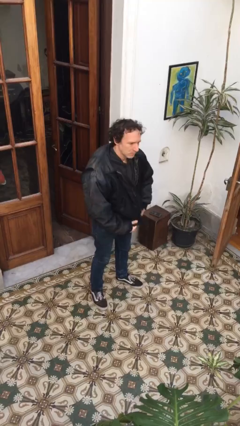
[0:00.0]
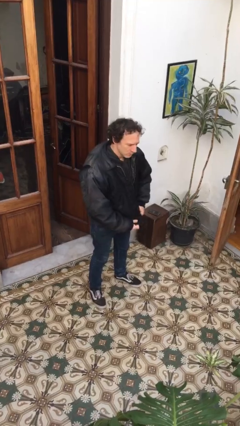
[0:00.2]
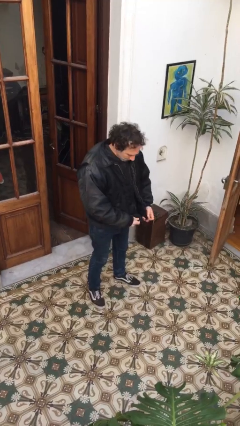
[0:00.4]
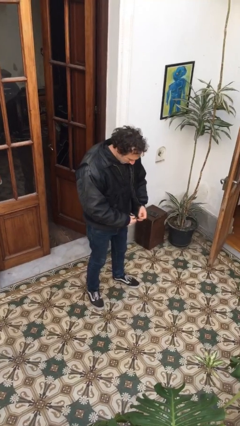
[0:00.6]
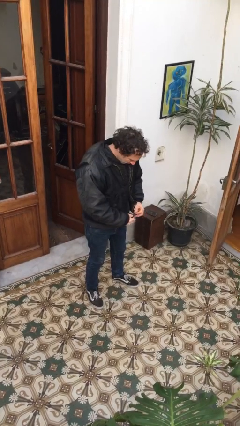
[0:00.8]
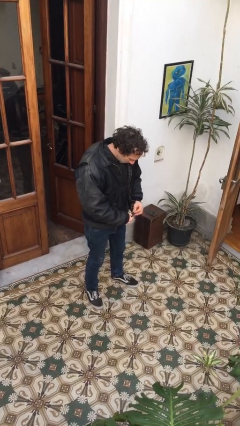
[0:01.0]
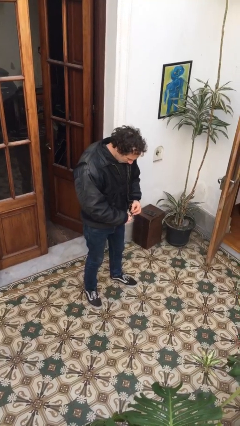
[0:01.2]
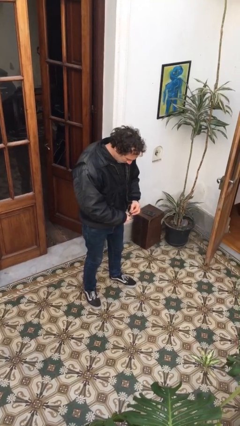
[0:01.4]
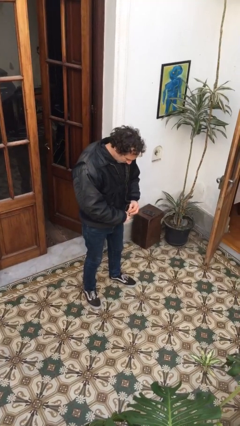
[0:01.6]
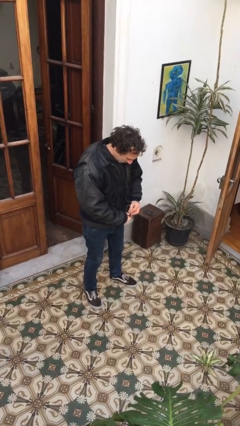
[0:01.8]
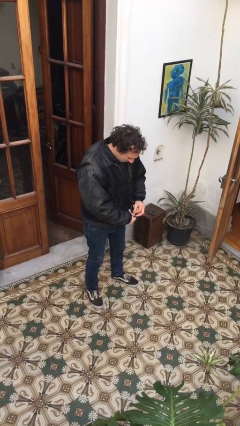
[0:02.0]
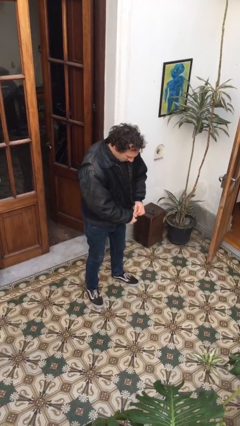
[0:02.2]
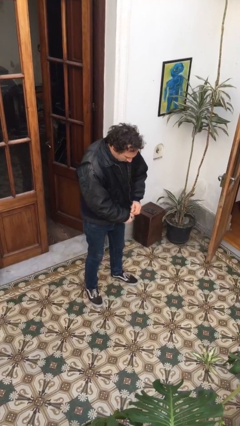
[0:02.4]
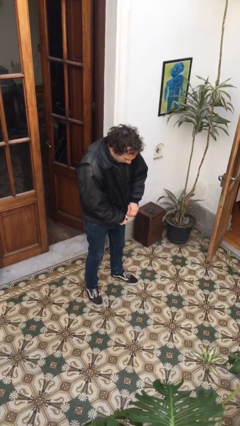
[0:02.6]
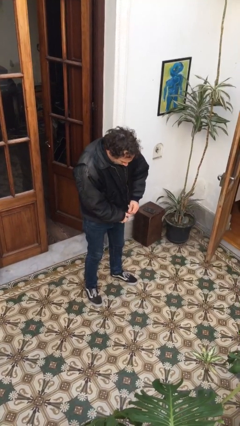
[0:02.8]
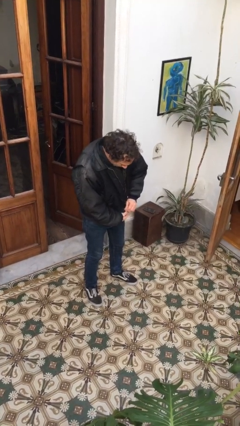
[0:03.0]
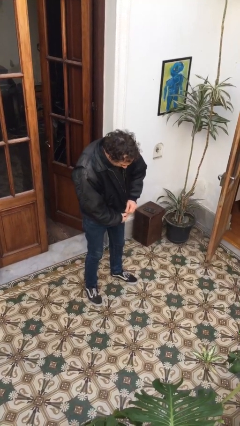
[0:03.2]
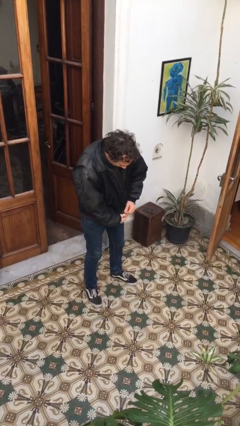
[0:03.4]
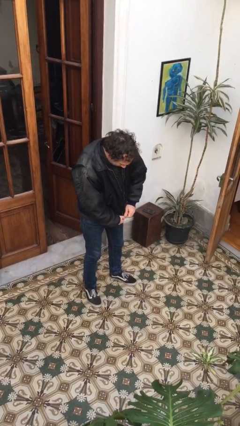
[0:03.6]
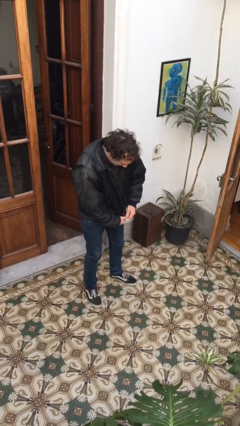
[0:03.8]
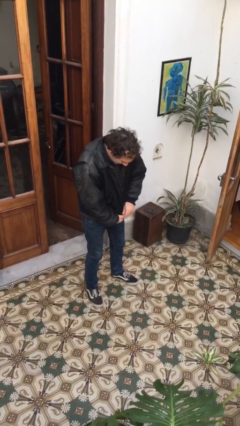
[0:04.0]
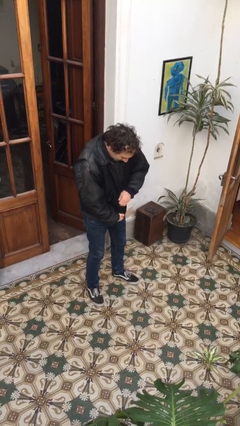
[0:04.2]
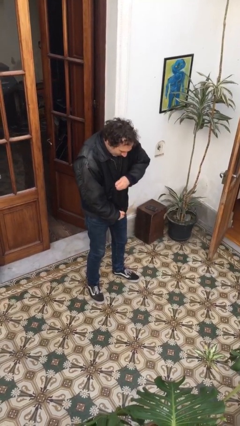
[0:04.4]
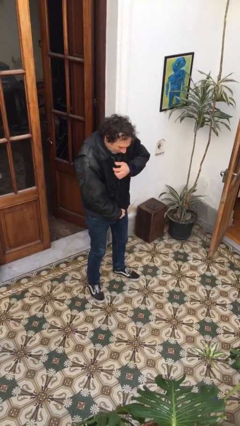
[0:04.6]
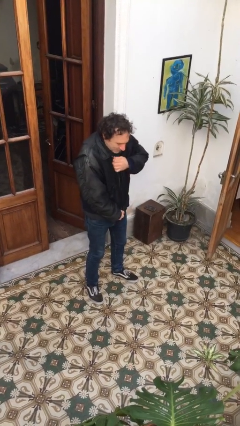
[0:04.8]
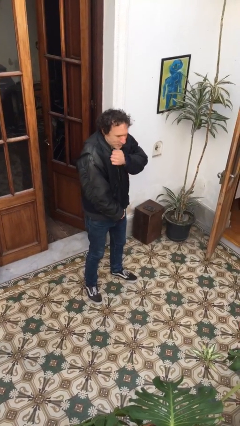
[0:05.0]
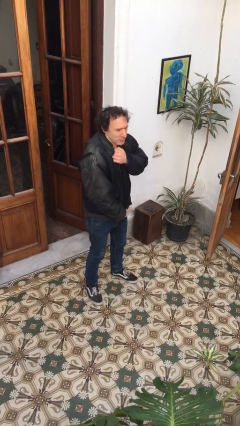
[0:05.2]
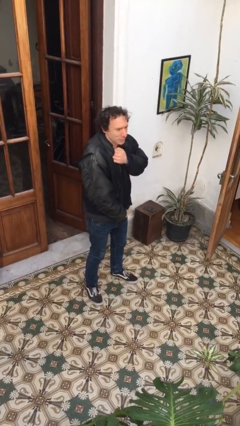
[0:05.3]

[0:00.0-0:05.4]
person zips up jacket

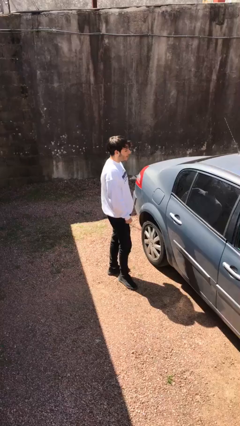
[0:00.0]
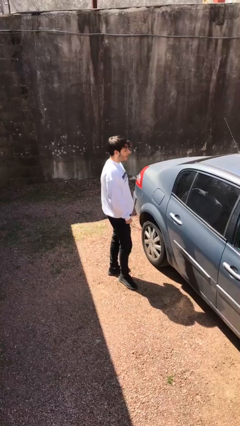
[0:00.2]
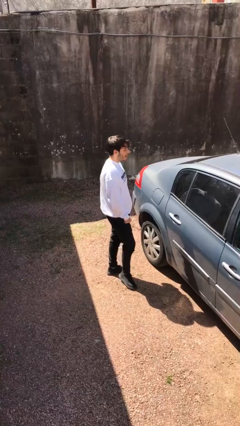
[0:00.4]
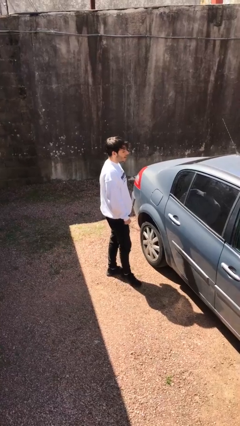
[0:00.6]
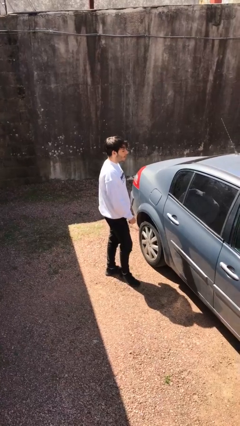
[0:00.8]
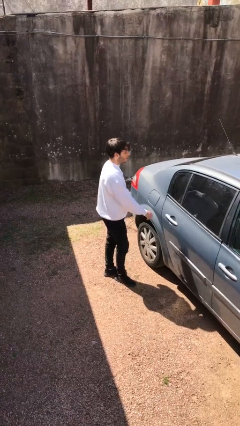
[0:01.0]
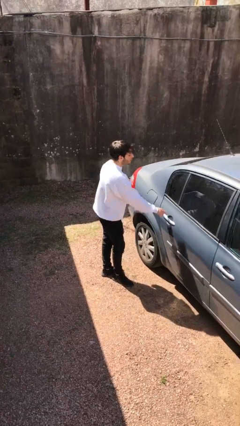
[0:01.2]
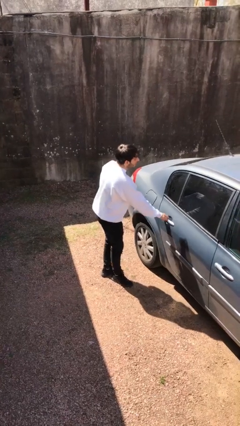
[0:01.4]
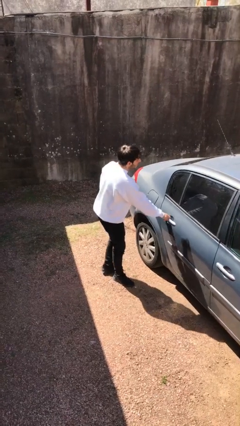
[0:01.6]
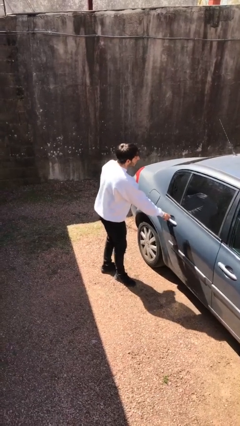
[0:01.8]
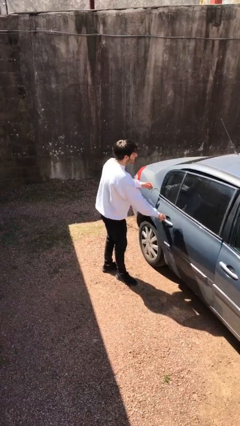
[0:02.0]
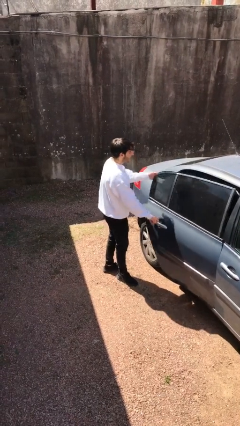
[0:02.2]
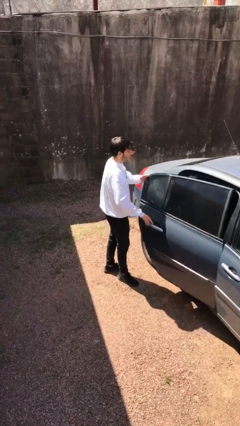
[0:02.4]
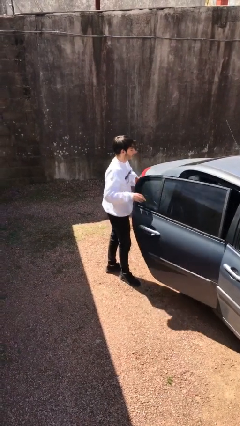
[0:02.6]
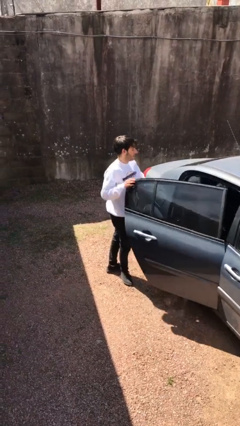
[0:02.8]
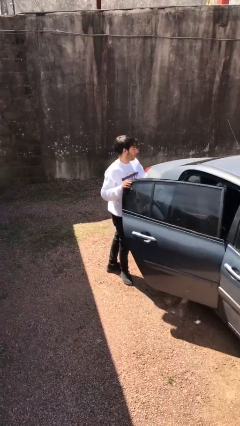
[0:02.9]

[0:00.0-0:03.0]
person opens car door

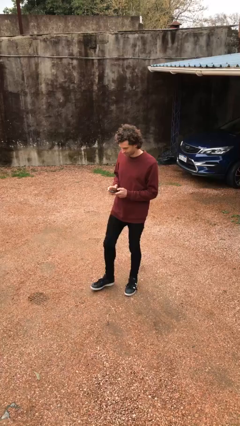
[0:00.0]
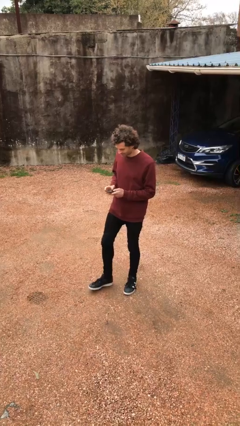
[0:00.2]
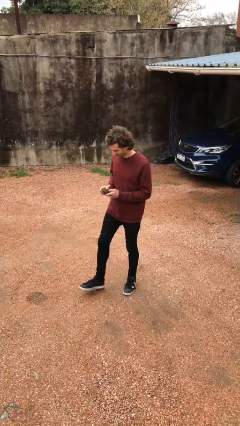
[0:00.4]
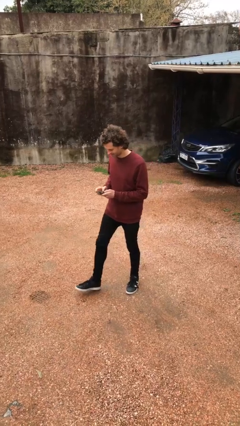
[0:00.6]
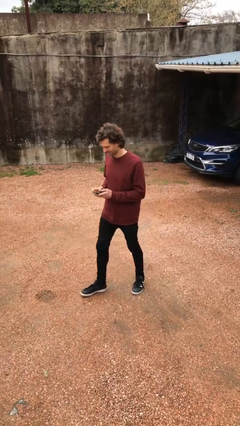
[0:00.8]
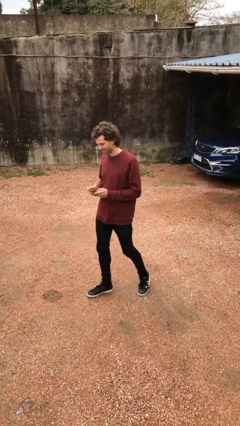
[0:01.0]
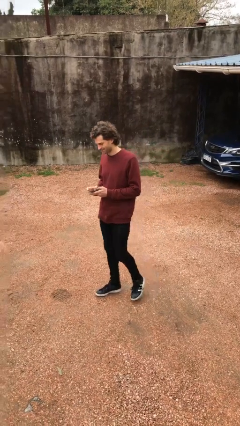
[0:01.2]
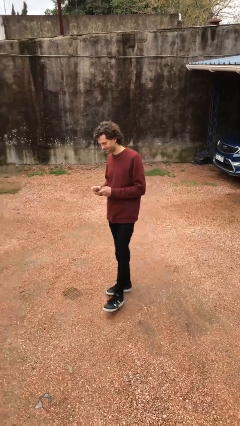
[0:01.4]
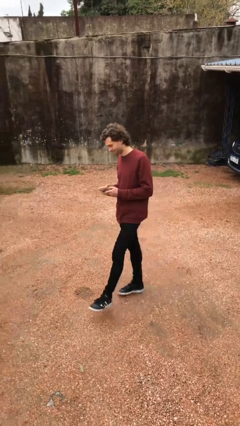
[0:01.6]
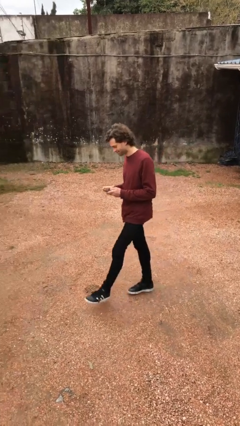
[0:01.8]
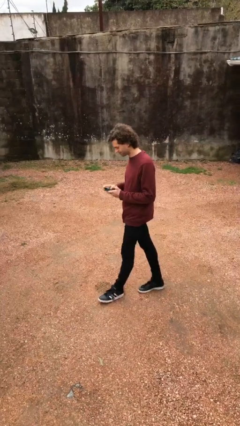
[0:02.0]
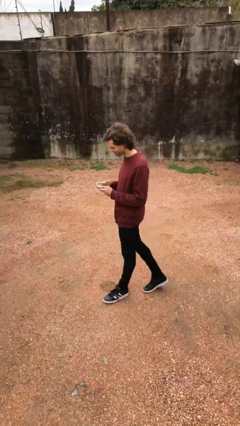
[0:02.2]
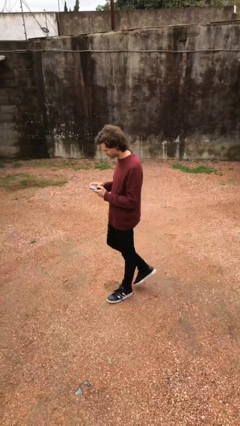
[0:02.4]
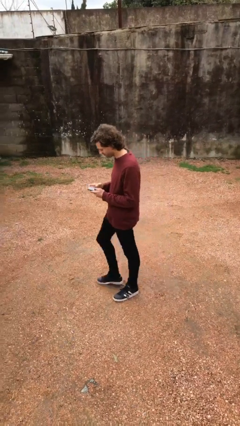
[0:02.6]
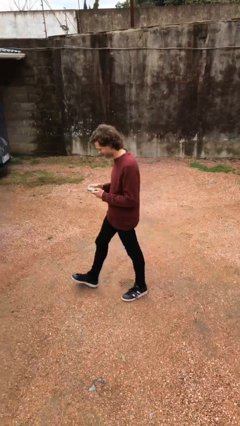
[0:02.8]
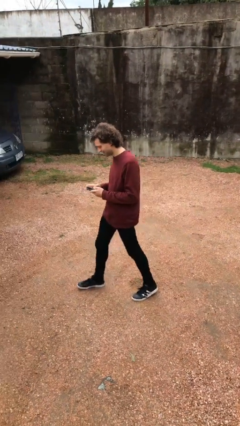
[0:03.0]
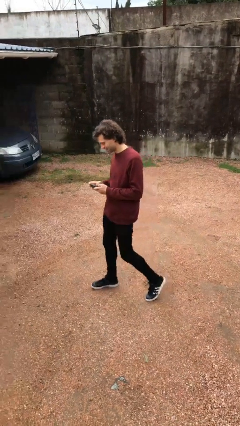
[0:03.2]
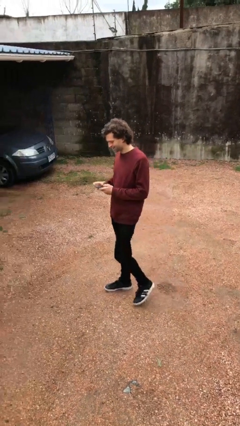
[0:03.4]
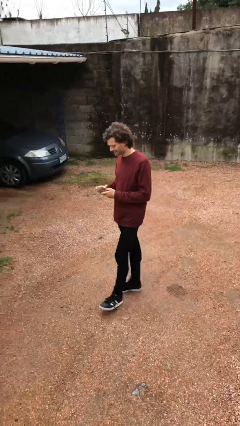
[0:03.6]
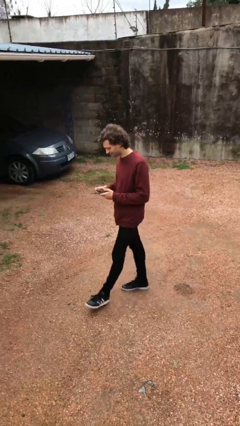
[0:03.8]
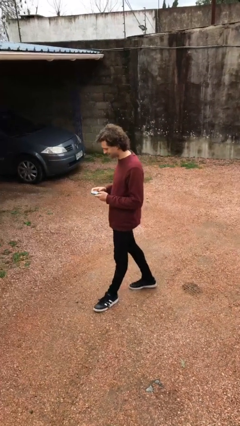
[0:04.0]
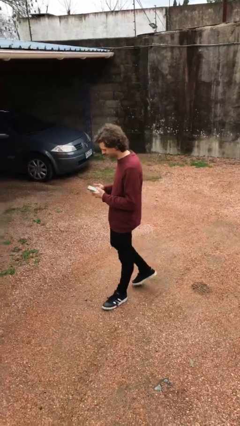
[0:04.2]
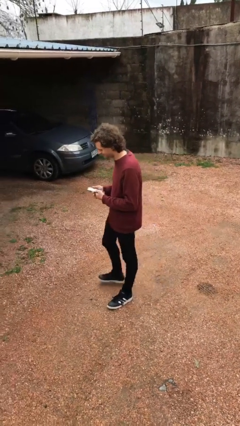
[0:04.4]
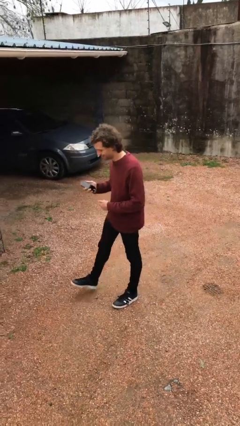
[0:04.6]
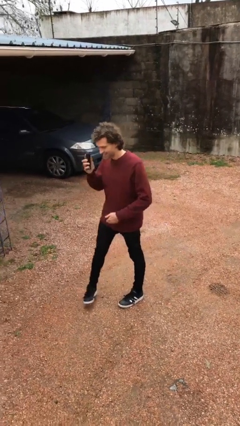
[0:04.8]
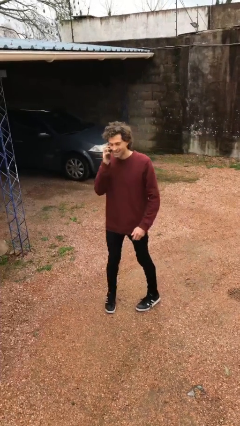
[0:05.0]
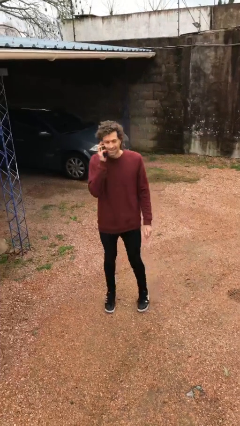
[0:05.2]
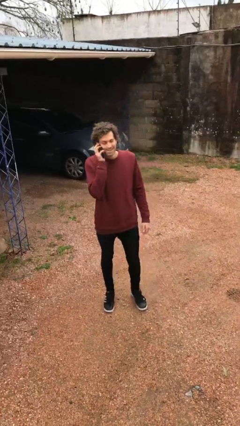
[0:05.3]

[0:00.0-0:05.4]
person texts on phone

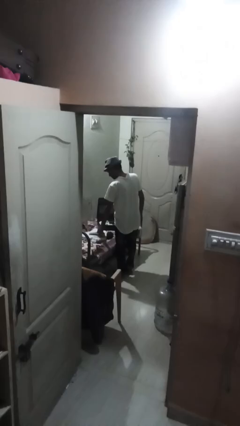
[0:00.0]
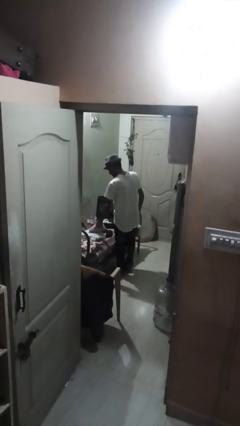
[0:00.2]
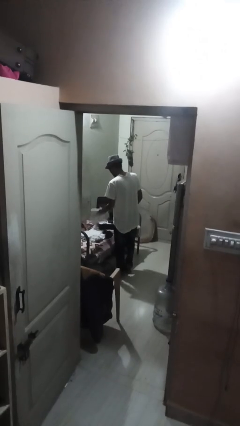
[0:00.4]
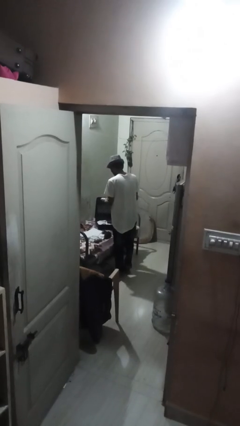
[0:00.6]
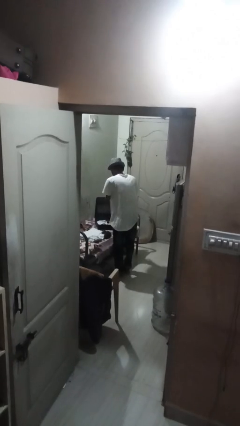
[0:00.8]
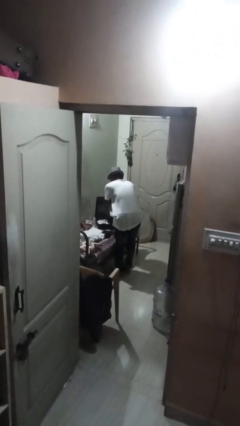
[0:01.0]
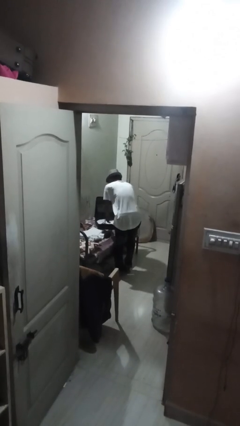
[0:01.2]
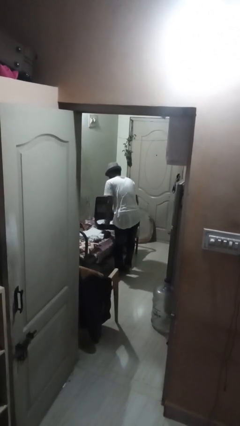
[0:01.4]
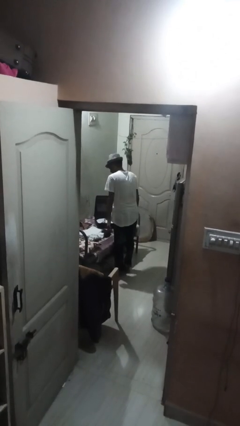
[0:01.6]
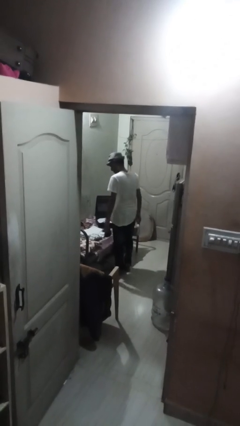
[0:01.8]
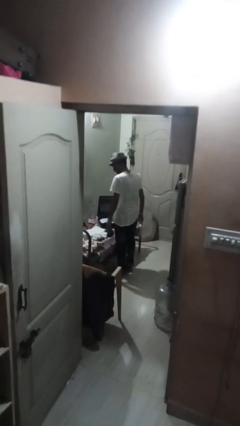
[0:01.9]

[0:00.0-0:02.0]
person loads clothes into suitcase

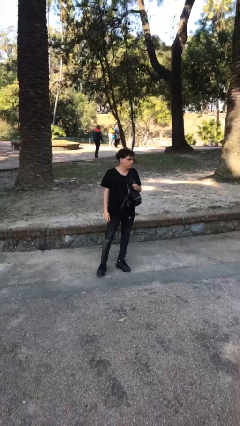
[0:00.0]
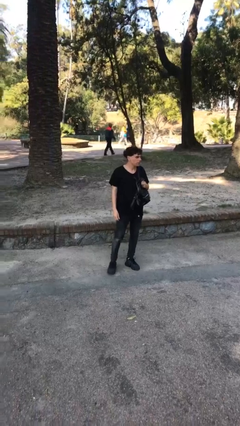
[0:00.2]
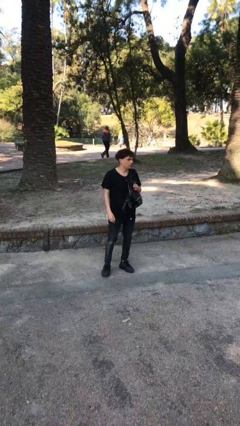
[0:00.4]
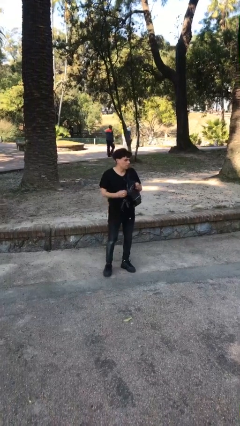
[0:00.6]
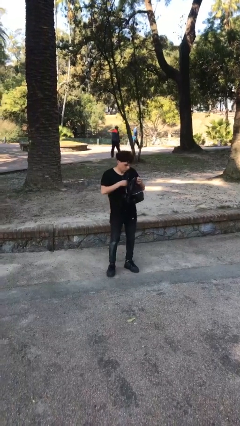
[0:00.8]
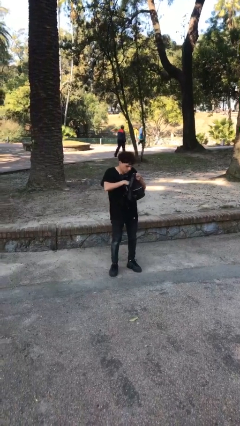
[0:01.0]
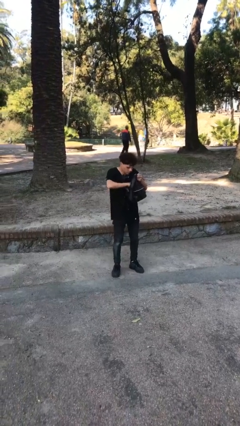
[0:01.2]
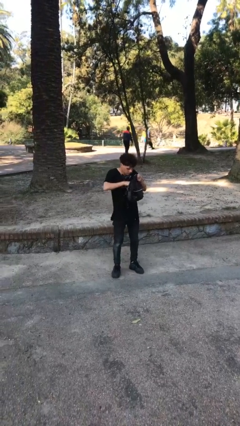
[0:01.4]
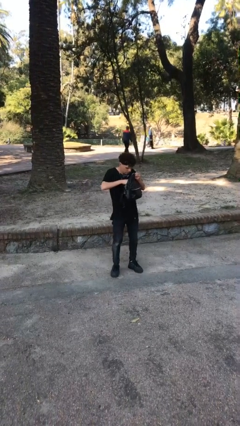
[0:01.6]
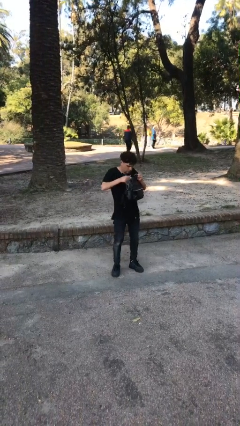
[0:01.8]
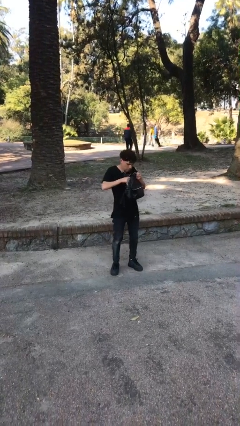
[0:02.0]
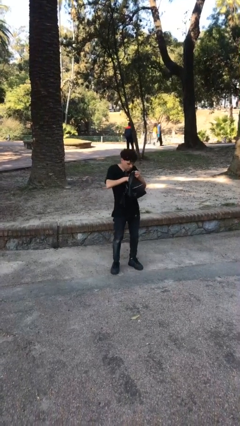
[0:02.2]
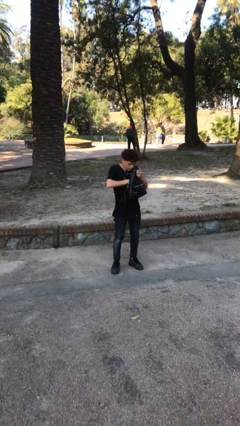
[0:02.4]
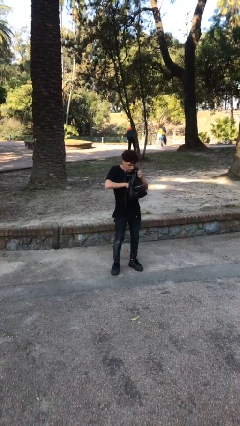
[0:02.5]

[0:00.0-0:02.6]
person searches in purse
